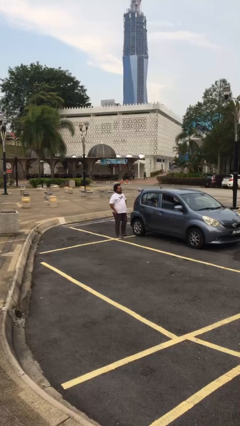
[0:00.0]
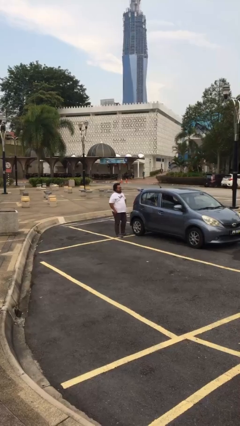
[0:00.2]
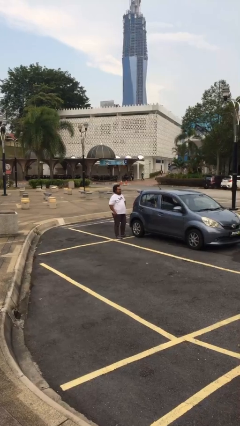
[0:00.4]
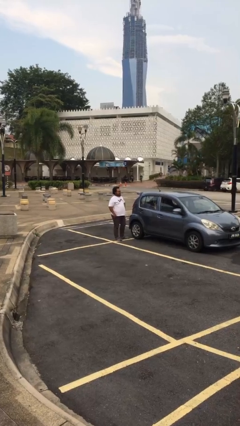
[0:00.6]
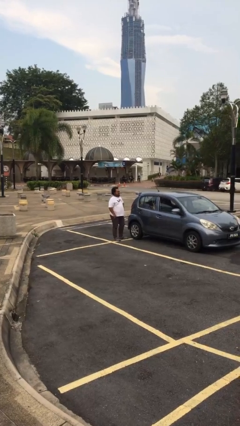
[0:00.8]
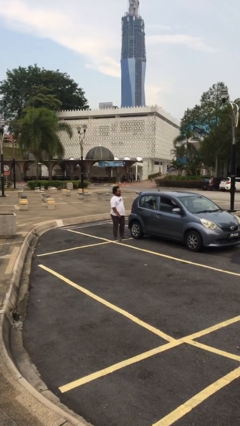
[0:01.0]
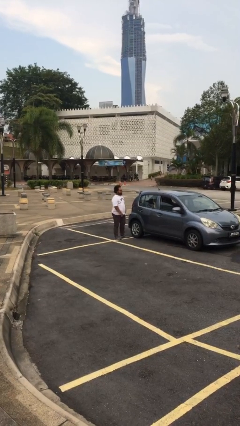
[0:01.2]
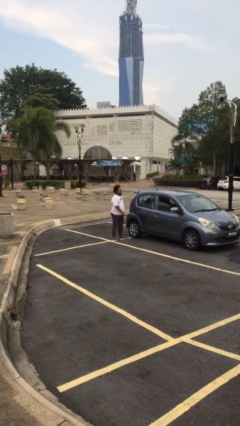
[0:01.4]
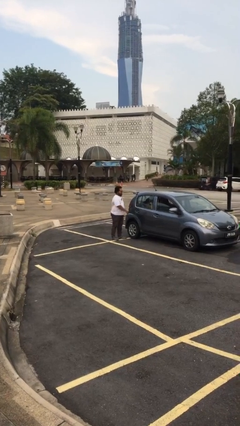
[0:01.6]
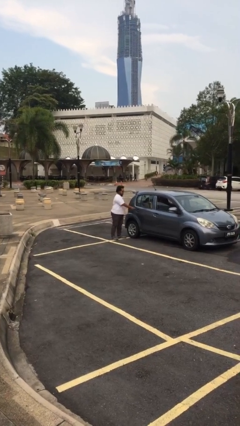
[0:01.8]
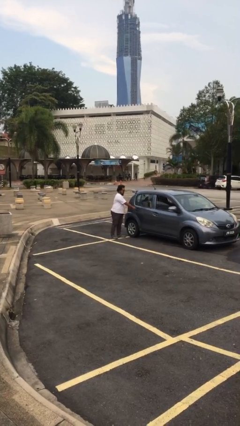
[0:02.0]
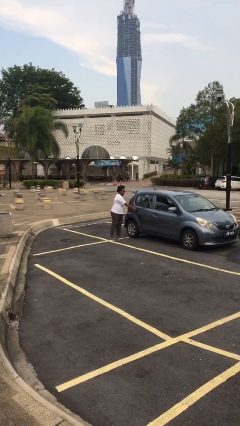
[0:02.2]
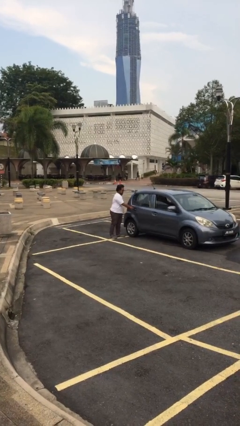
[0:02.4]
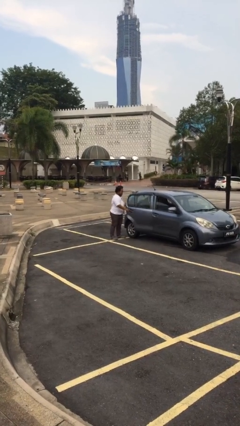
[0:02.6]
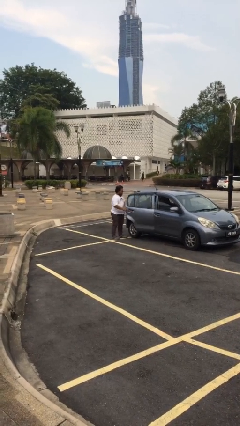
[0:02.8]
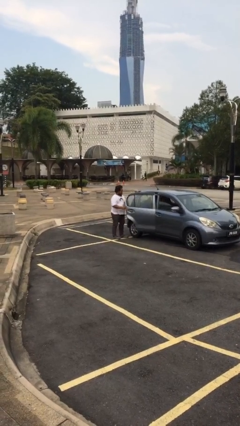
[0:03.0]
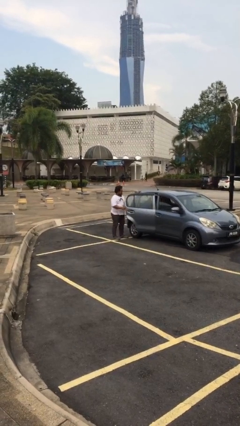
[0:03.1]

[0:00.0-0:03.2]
person opens car door

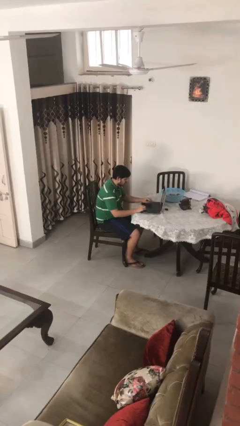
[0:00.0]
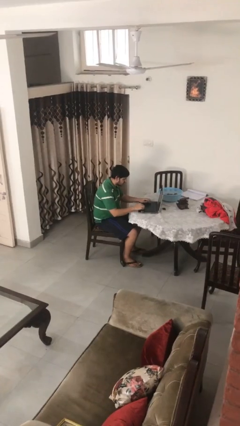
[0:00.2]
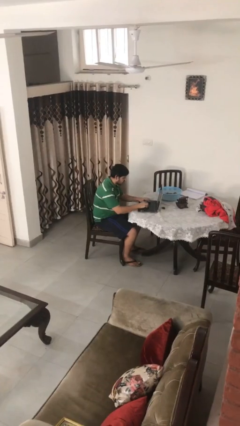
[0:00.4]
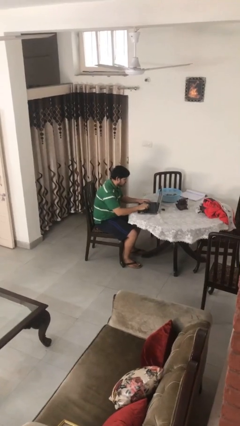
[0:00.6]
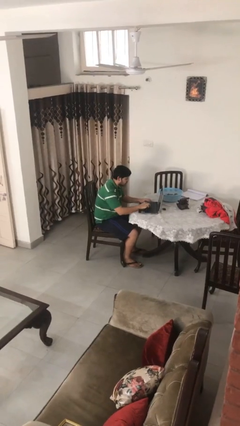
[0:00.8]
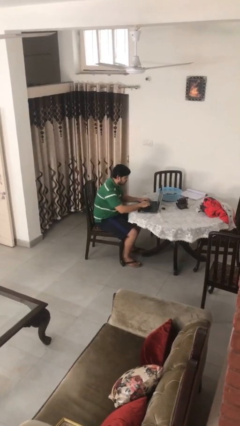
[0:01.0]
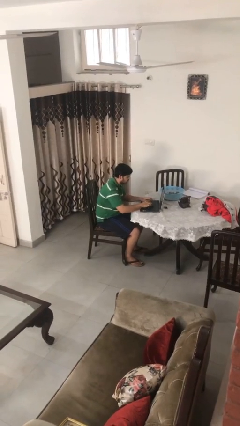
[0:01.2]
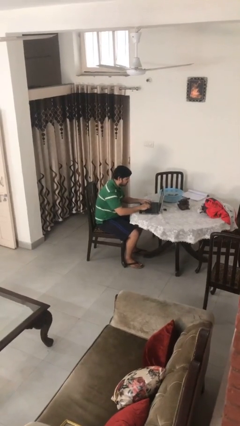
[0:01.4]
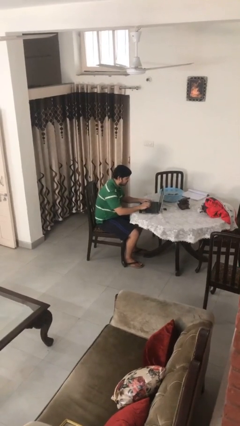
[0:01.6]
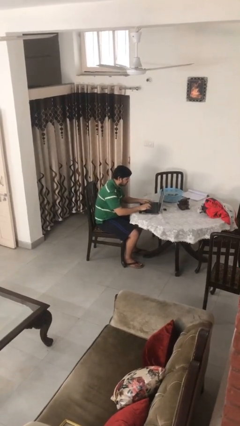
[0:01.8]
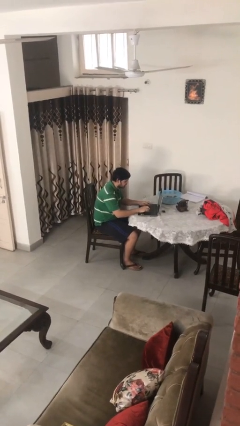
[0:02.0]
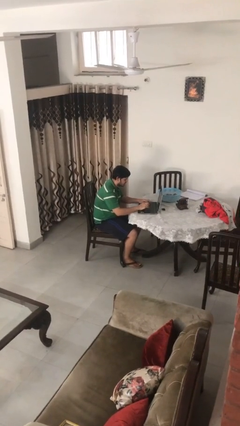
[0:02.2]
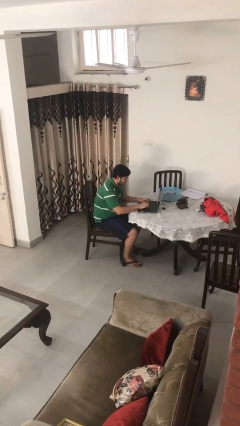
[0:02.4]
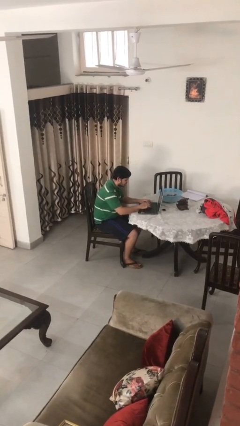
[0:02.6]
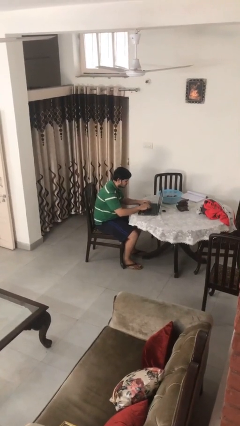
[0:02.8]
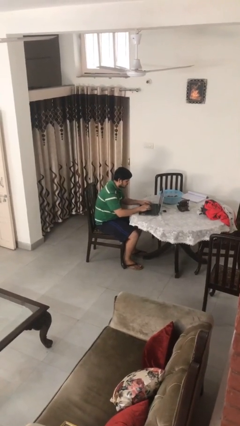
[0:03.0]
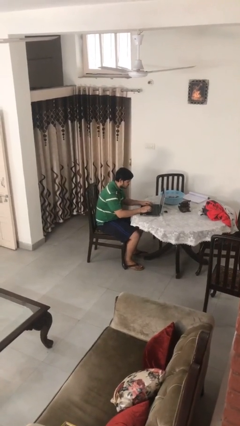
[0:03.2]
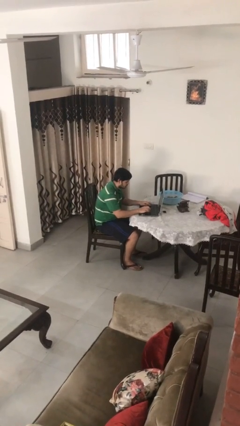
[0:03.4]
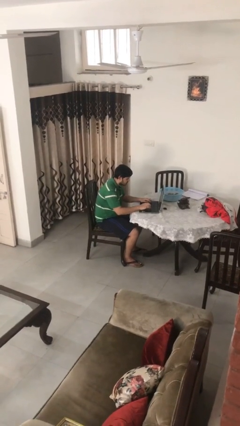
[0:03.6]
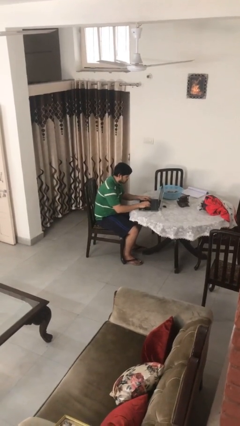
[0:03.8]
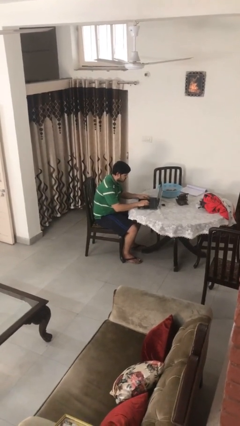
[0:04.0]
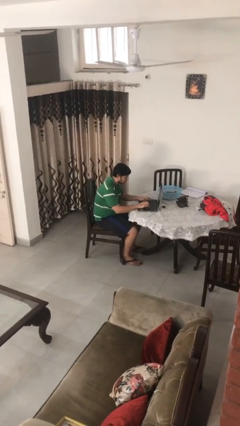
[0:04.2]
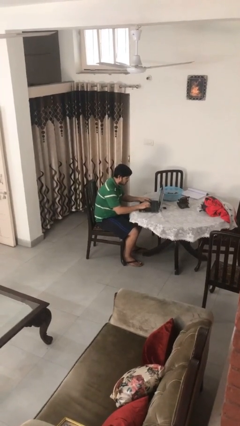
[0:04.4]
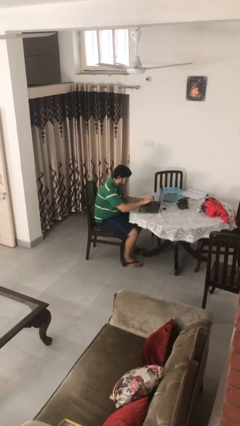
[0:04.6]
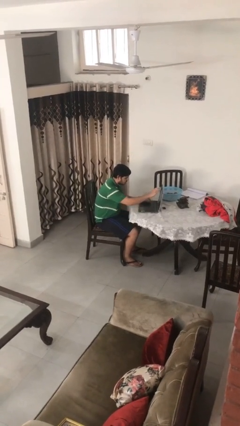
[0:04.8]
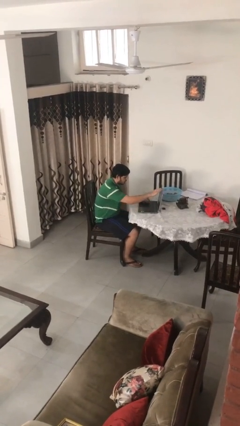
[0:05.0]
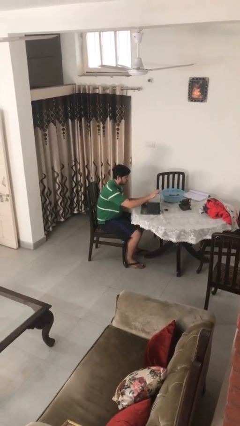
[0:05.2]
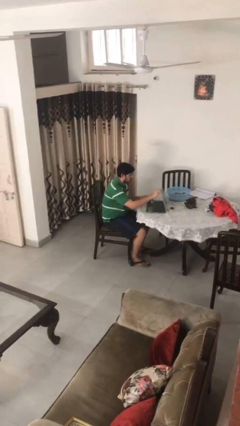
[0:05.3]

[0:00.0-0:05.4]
person interacts with laptop

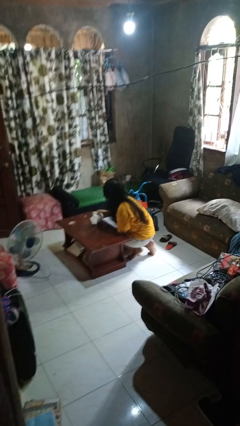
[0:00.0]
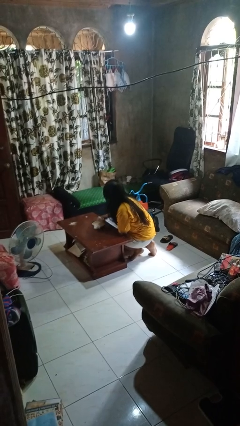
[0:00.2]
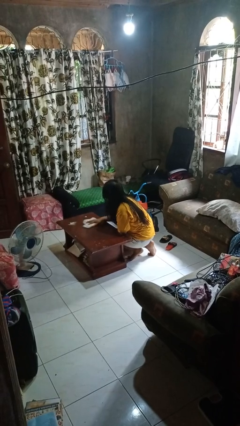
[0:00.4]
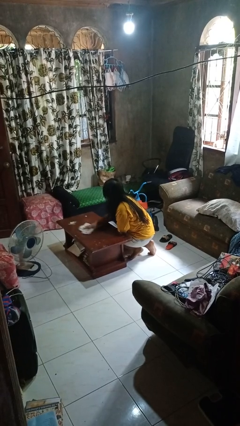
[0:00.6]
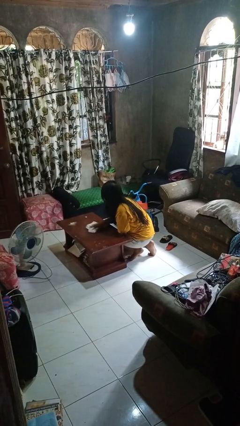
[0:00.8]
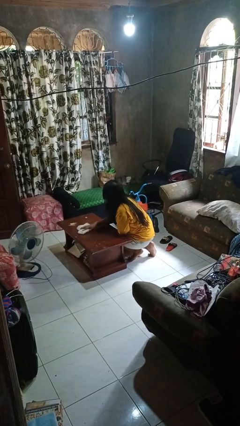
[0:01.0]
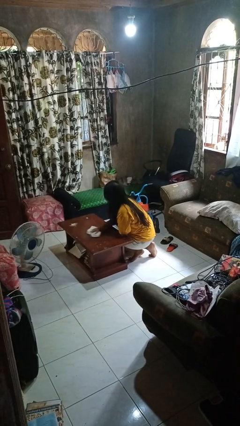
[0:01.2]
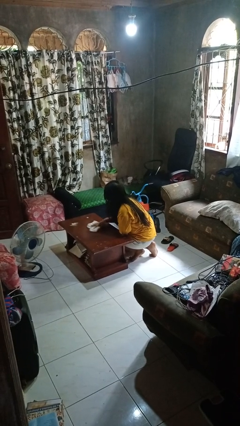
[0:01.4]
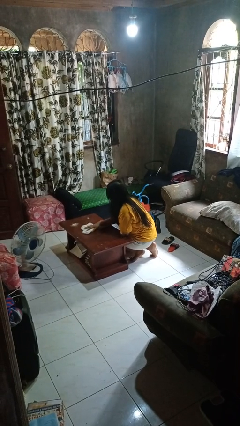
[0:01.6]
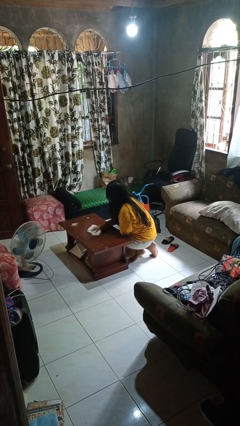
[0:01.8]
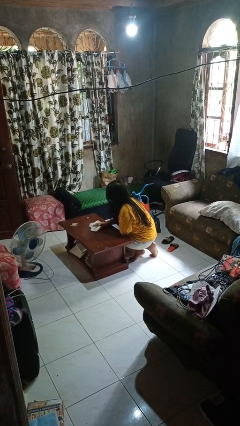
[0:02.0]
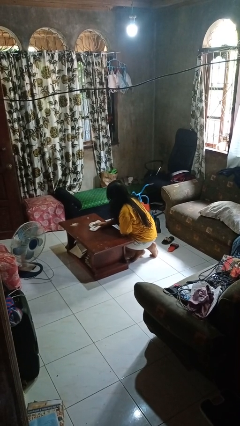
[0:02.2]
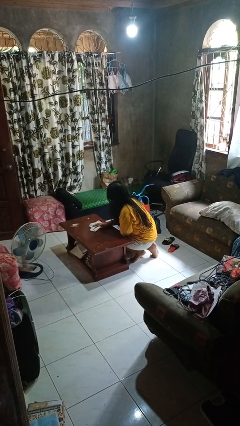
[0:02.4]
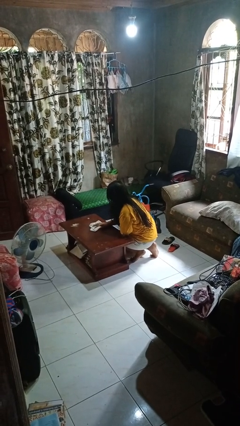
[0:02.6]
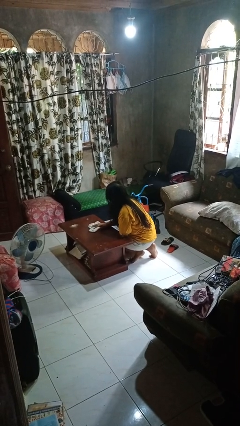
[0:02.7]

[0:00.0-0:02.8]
person cleans table with rag

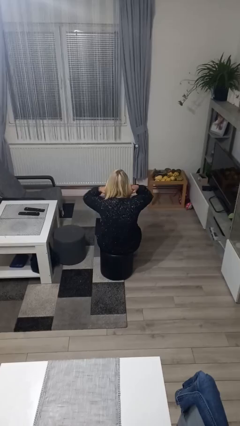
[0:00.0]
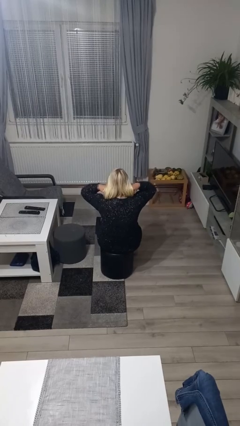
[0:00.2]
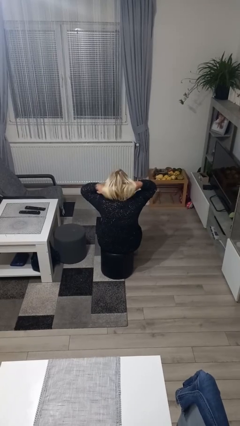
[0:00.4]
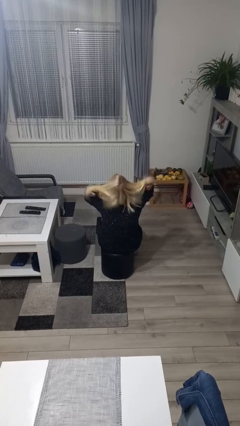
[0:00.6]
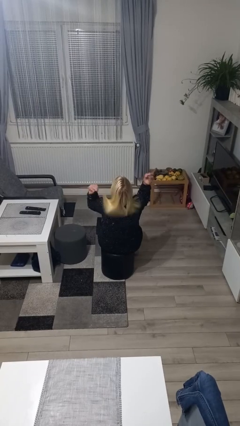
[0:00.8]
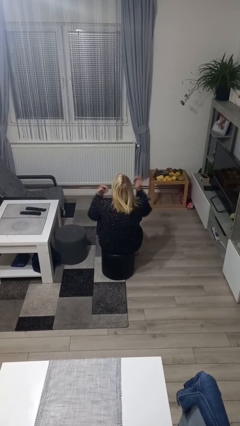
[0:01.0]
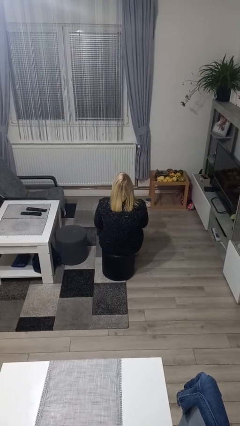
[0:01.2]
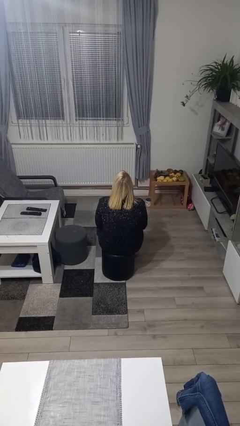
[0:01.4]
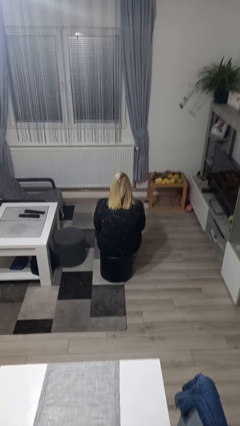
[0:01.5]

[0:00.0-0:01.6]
person strokes hair

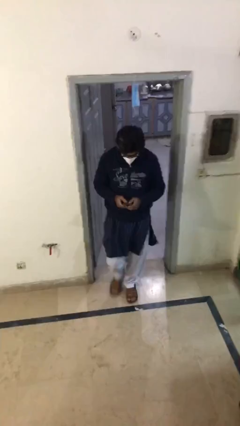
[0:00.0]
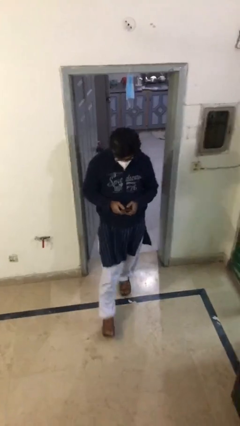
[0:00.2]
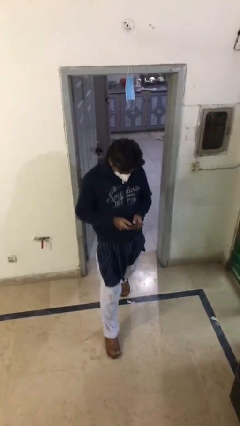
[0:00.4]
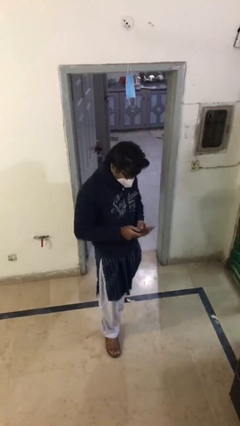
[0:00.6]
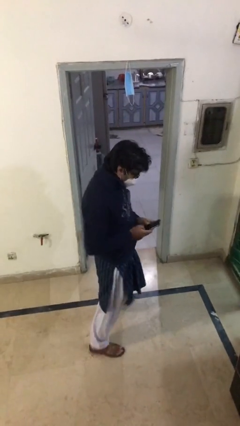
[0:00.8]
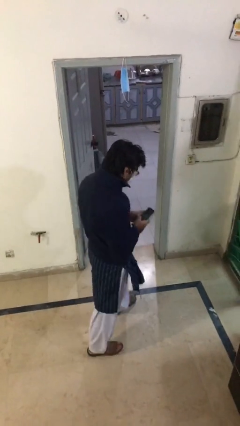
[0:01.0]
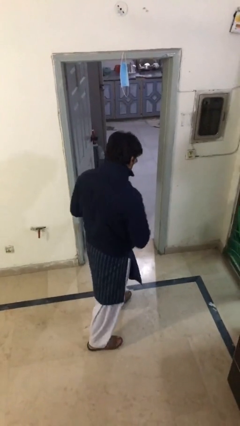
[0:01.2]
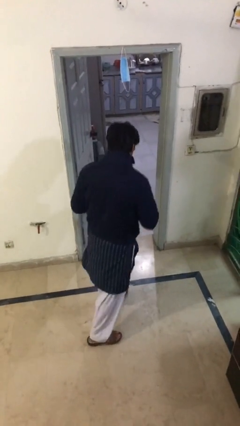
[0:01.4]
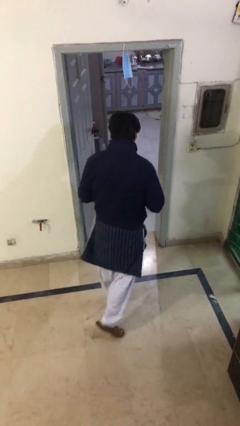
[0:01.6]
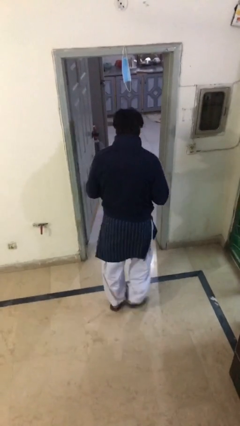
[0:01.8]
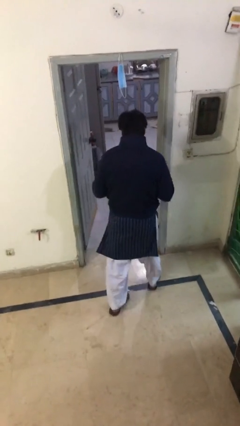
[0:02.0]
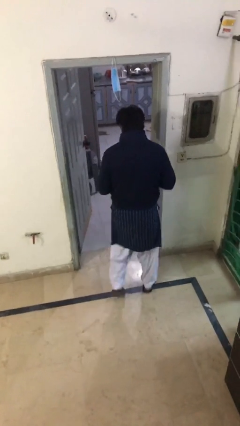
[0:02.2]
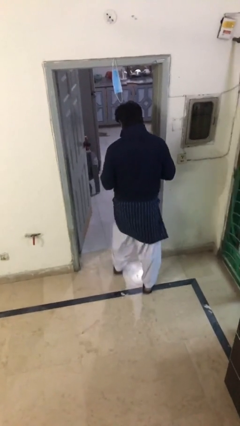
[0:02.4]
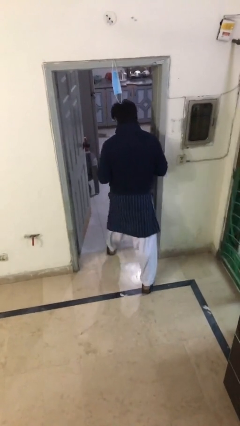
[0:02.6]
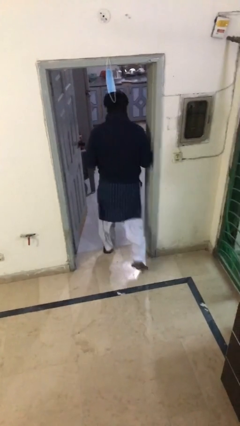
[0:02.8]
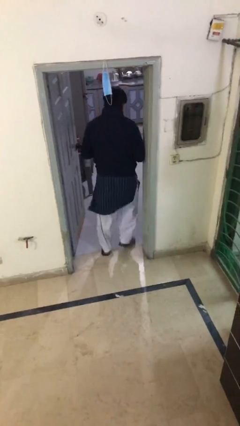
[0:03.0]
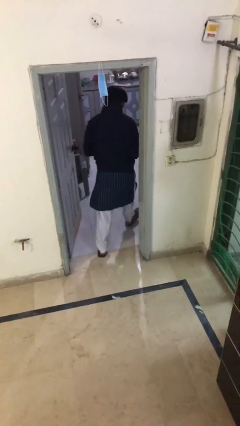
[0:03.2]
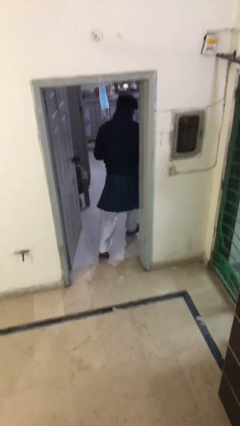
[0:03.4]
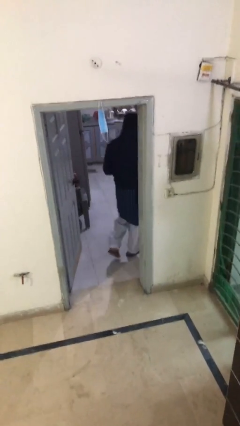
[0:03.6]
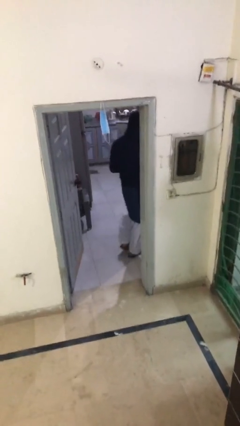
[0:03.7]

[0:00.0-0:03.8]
person exits scene through structure

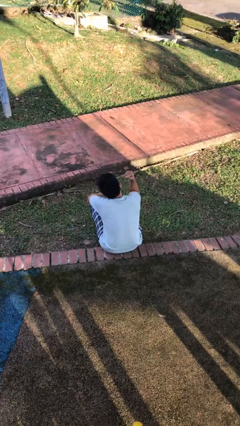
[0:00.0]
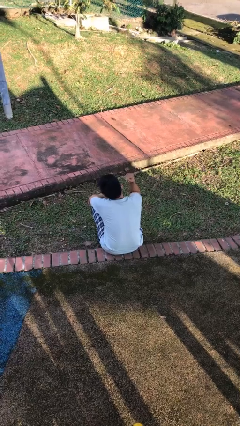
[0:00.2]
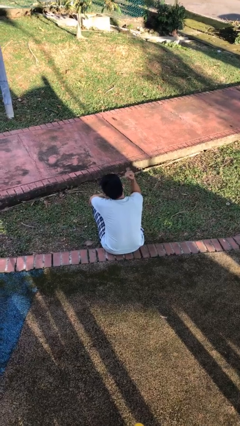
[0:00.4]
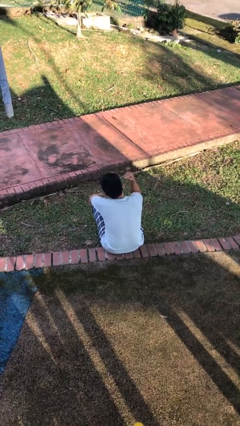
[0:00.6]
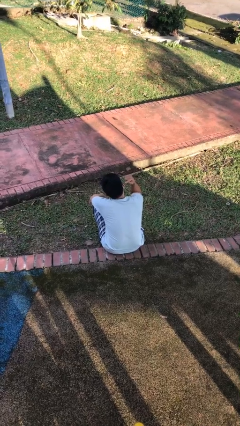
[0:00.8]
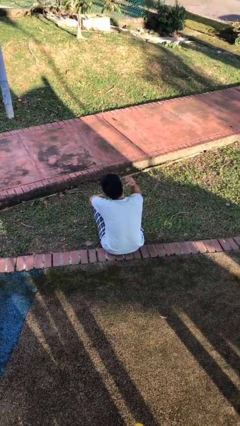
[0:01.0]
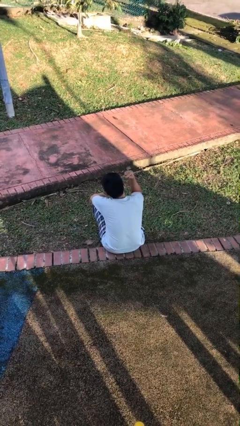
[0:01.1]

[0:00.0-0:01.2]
person gestures listen closely
